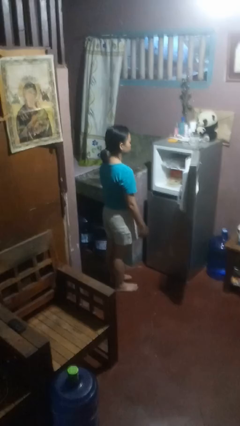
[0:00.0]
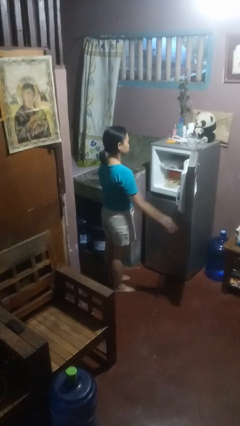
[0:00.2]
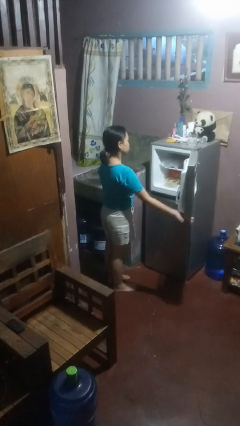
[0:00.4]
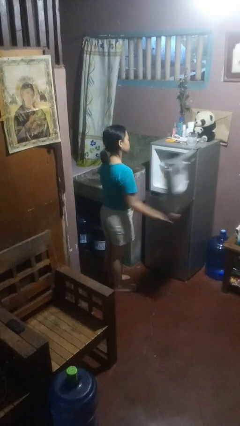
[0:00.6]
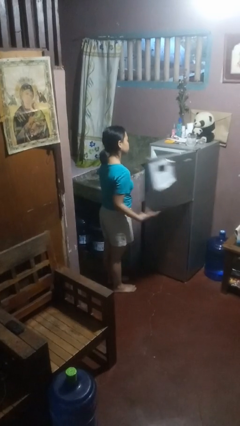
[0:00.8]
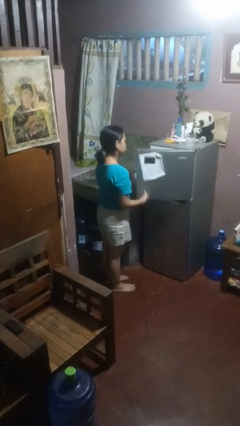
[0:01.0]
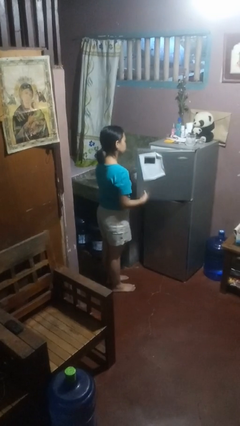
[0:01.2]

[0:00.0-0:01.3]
person closes refrigerator

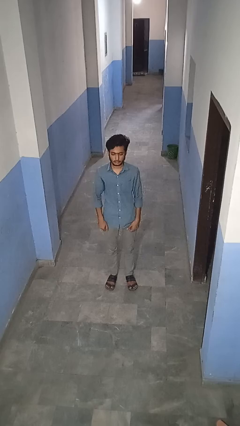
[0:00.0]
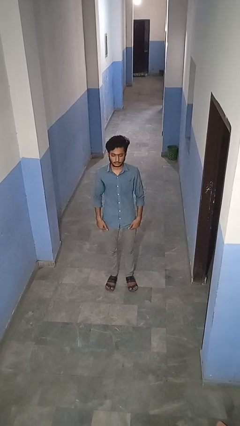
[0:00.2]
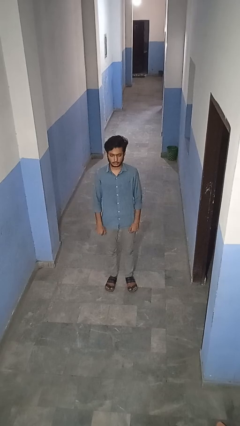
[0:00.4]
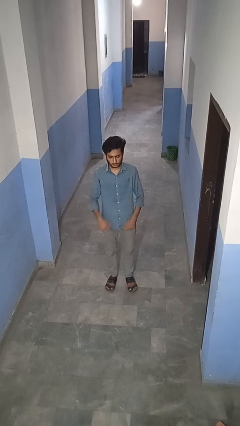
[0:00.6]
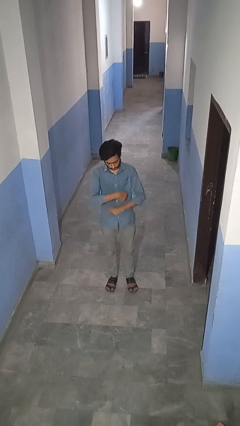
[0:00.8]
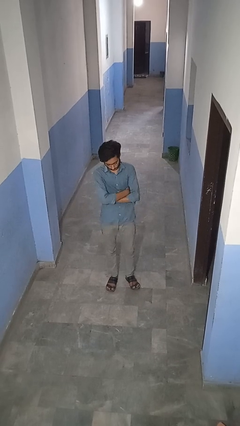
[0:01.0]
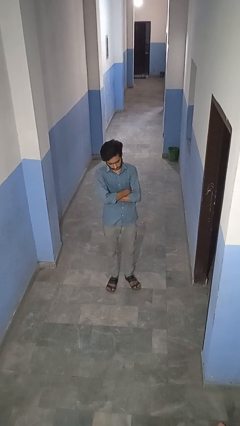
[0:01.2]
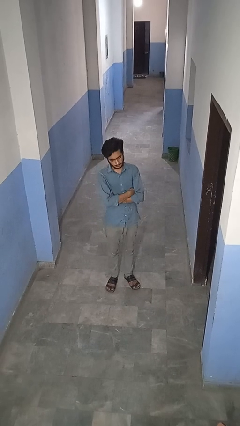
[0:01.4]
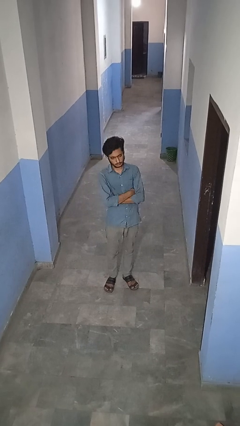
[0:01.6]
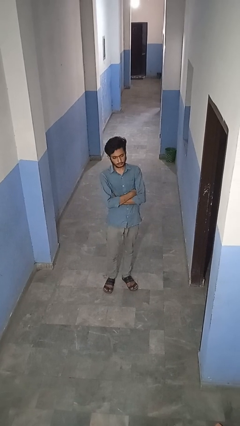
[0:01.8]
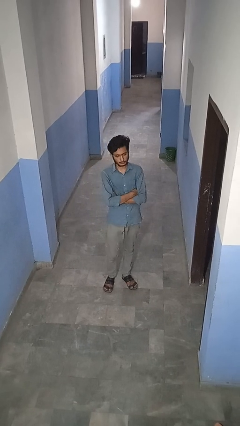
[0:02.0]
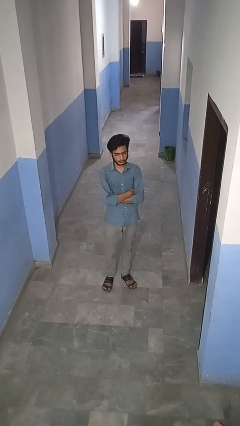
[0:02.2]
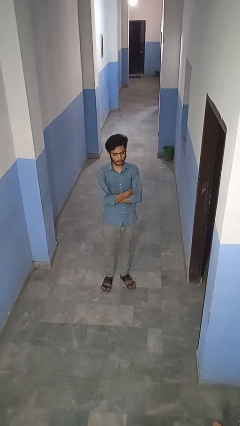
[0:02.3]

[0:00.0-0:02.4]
person crosses arms

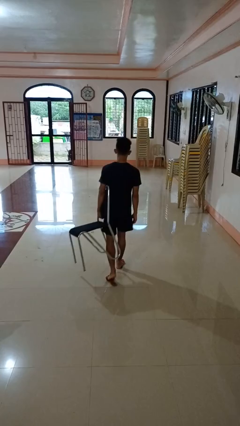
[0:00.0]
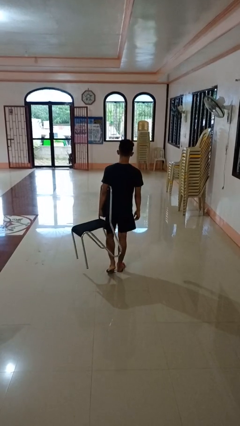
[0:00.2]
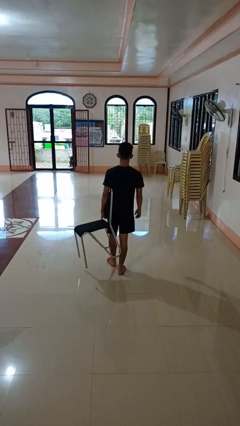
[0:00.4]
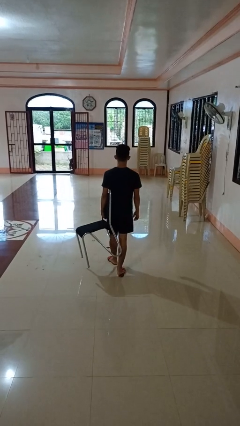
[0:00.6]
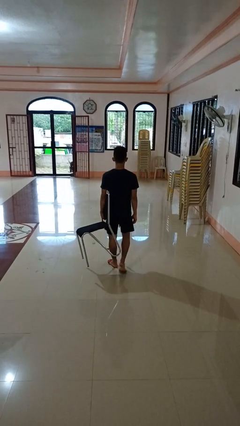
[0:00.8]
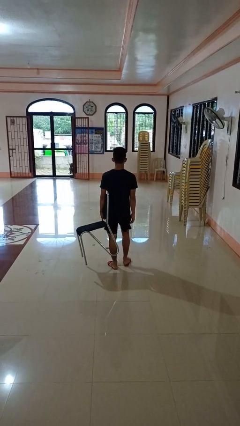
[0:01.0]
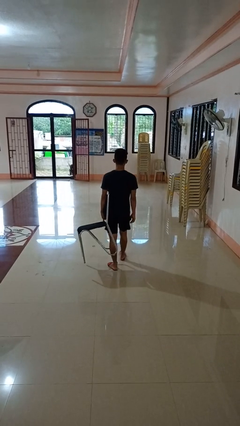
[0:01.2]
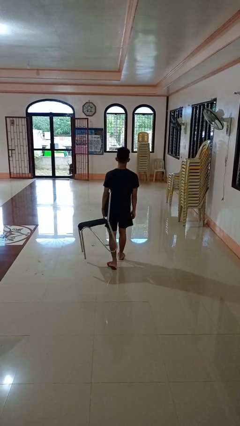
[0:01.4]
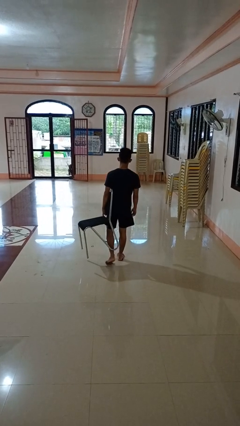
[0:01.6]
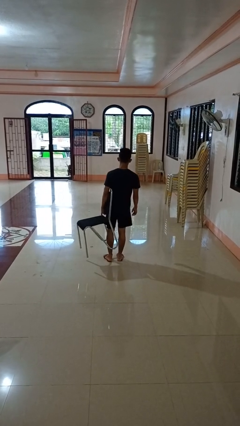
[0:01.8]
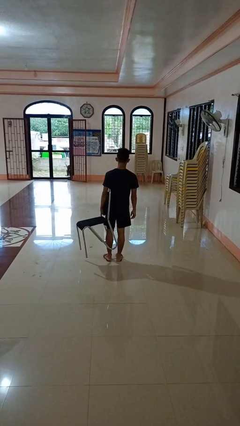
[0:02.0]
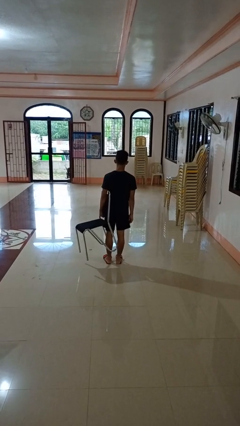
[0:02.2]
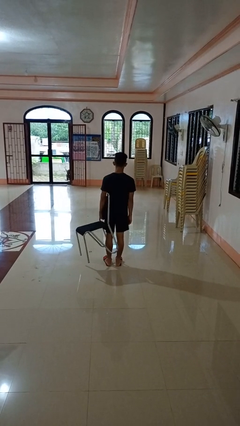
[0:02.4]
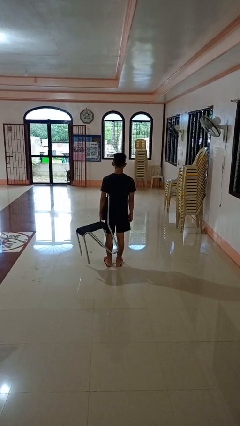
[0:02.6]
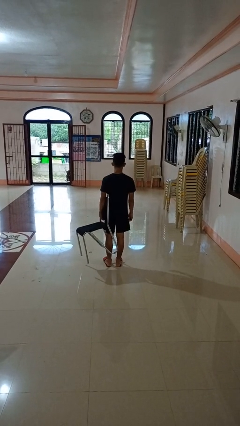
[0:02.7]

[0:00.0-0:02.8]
person carries furniture

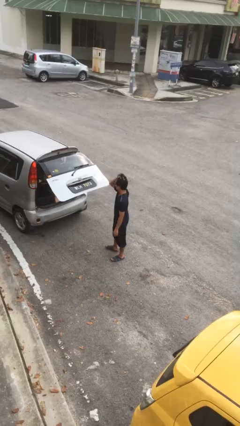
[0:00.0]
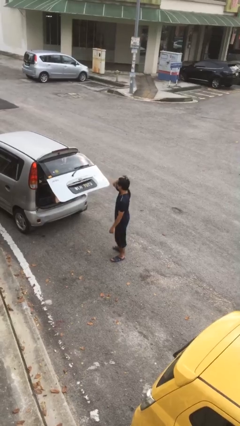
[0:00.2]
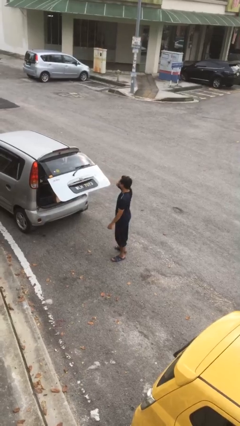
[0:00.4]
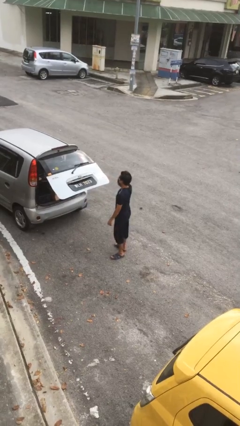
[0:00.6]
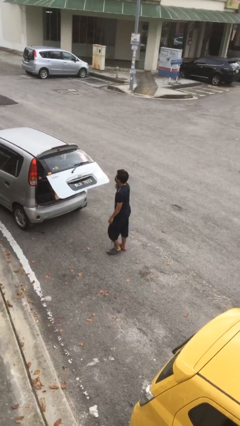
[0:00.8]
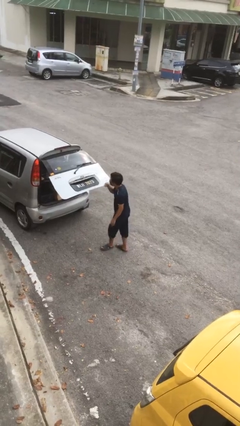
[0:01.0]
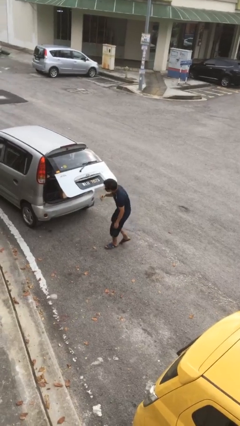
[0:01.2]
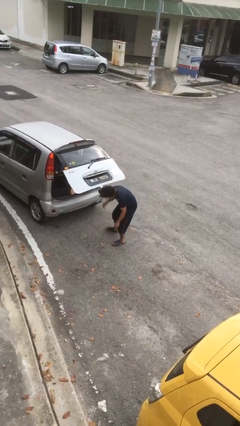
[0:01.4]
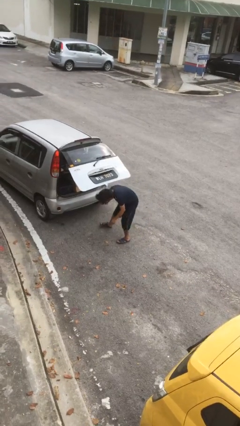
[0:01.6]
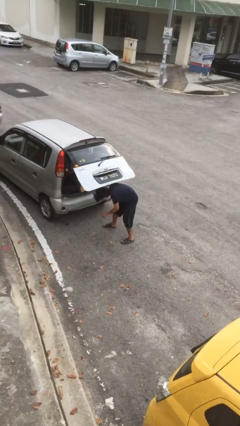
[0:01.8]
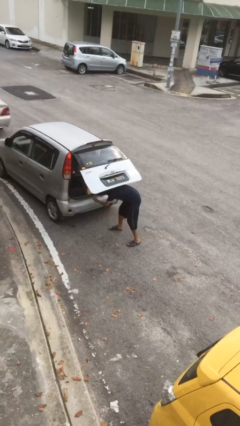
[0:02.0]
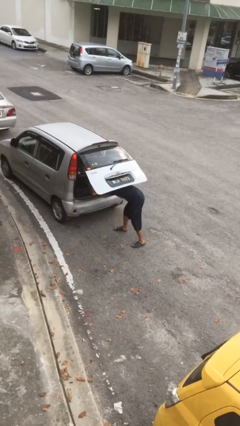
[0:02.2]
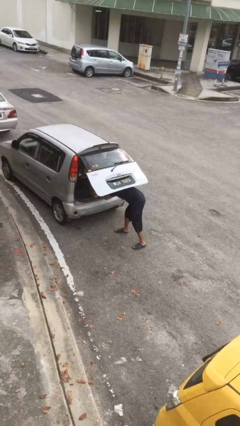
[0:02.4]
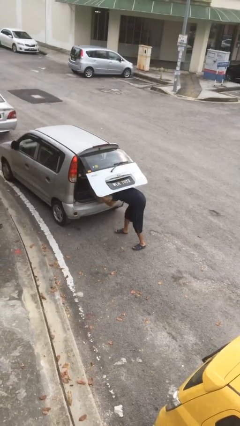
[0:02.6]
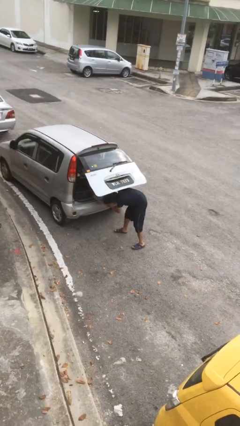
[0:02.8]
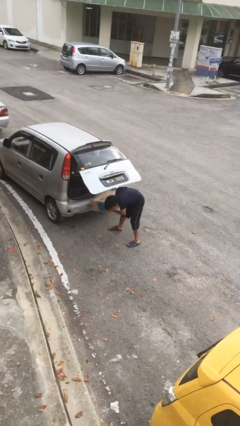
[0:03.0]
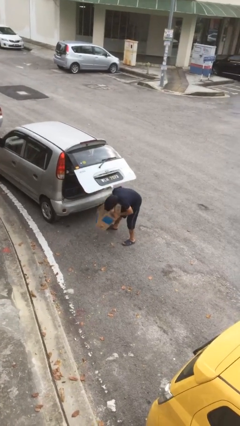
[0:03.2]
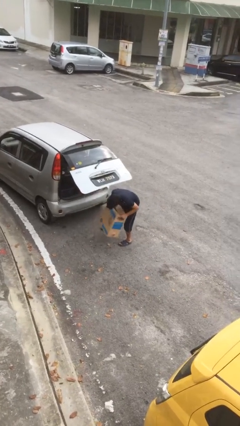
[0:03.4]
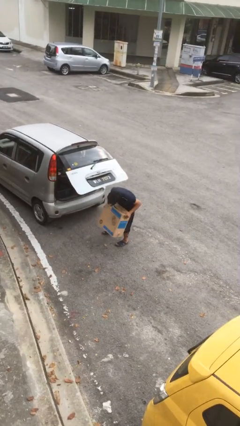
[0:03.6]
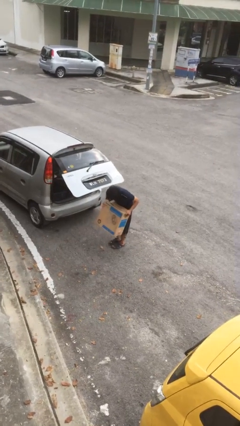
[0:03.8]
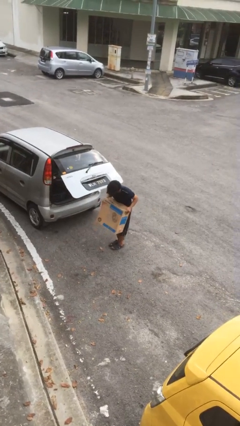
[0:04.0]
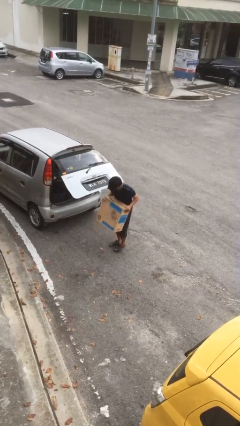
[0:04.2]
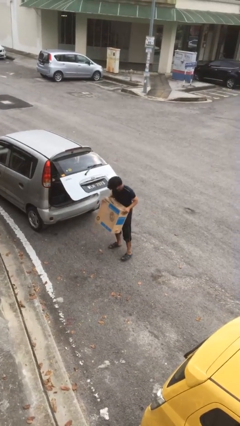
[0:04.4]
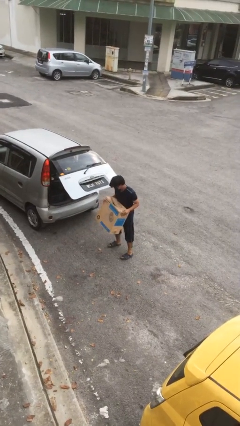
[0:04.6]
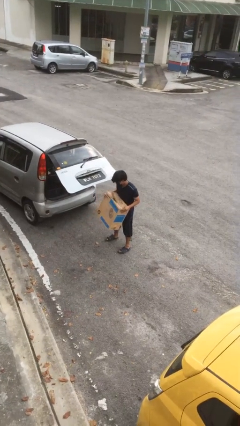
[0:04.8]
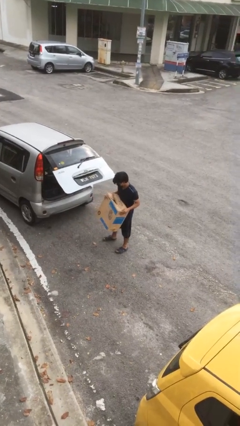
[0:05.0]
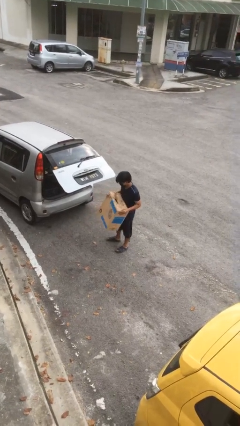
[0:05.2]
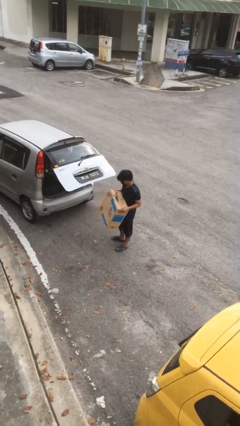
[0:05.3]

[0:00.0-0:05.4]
person unloads car

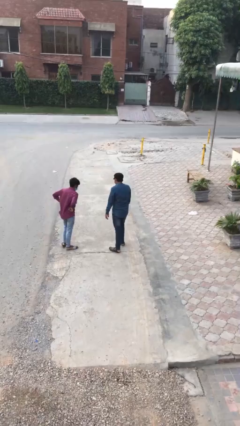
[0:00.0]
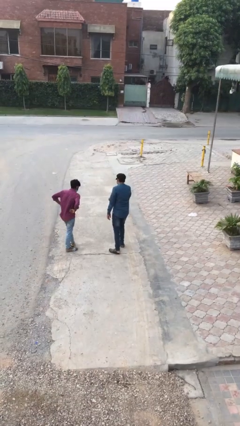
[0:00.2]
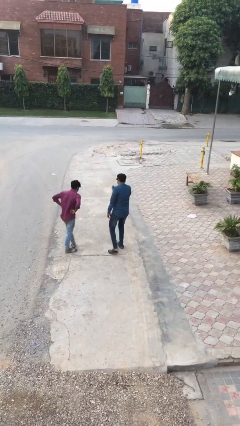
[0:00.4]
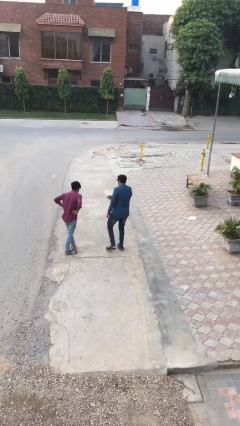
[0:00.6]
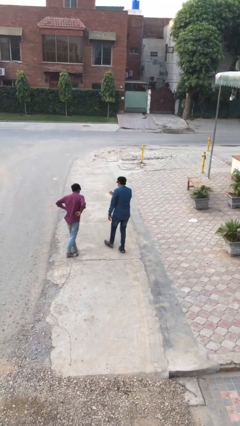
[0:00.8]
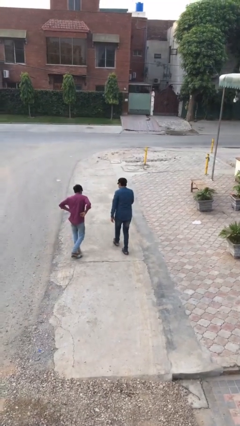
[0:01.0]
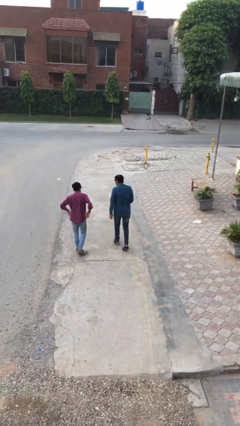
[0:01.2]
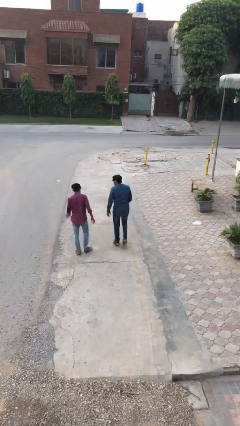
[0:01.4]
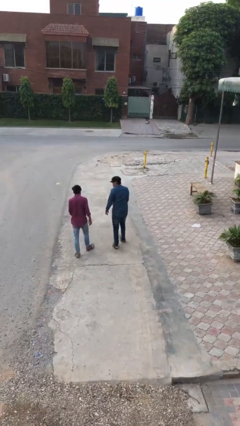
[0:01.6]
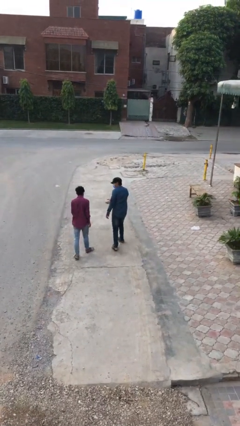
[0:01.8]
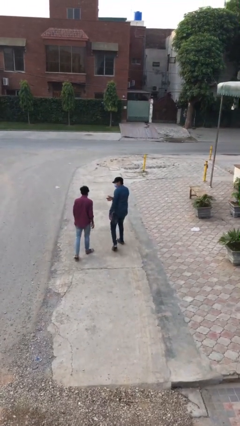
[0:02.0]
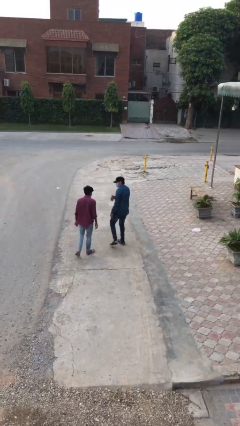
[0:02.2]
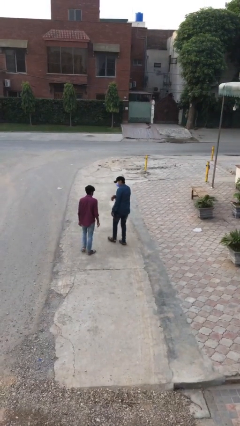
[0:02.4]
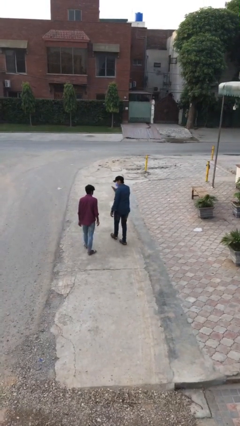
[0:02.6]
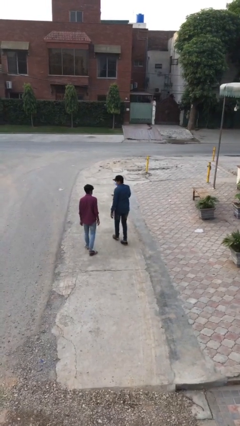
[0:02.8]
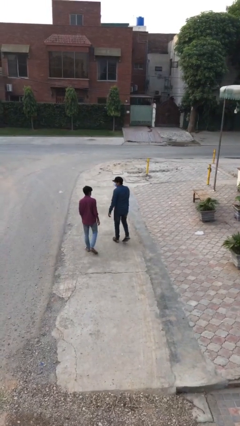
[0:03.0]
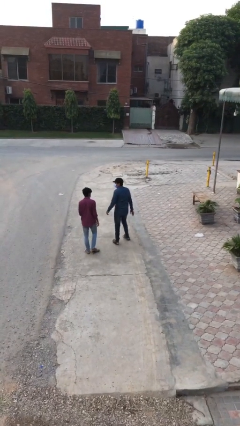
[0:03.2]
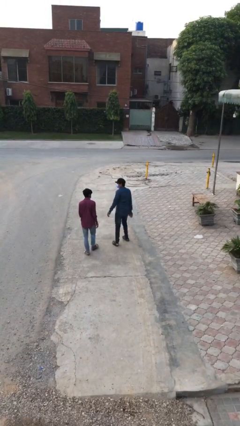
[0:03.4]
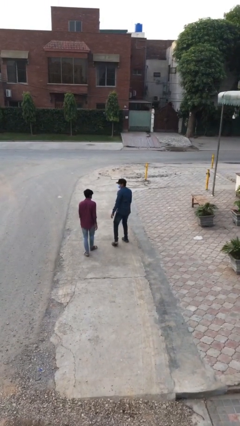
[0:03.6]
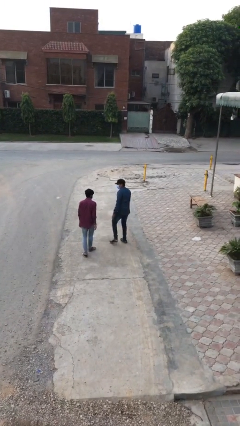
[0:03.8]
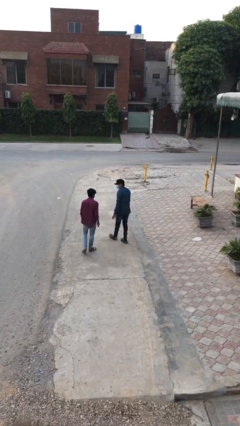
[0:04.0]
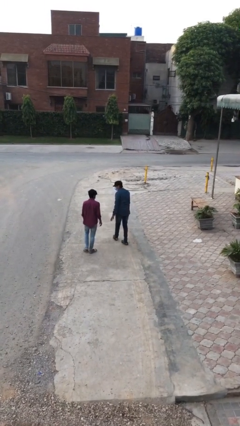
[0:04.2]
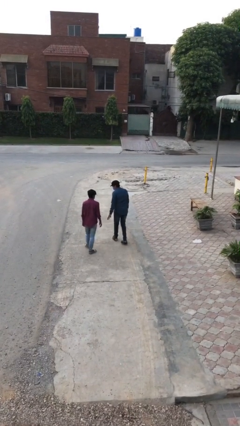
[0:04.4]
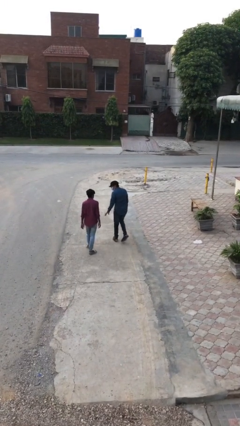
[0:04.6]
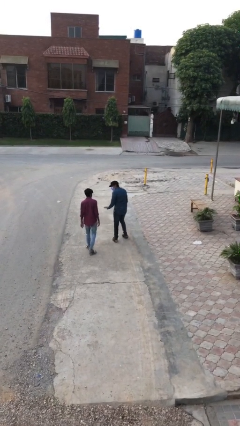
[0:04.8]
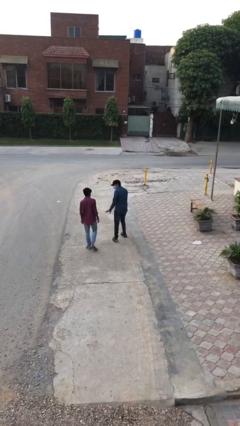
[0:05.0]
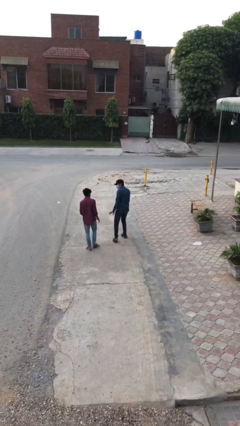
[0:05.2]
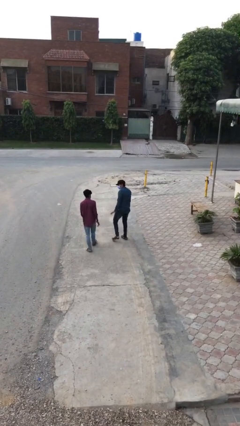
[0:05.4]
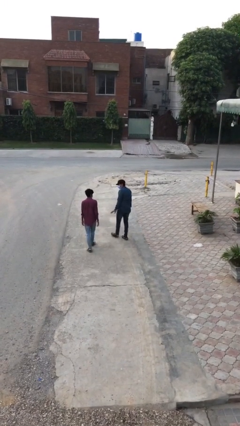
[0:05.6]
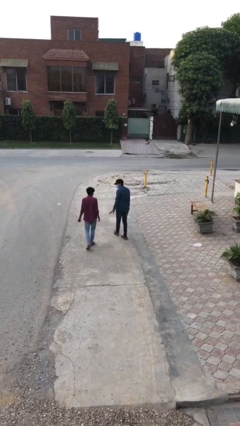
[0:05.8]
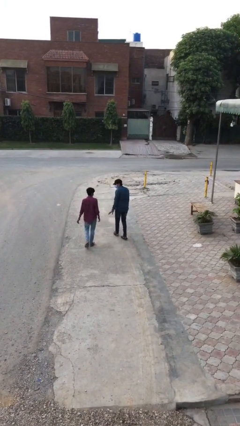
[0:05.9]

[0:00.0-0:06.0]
person talks to person
